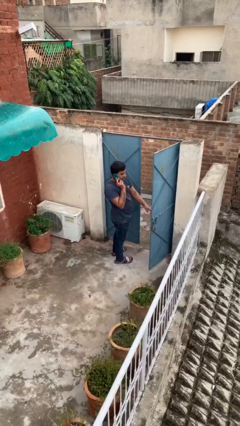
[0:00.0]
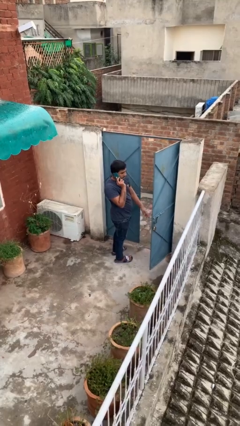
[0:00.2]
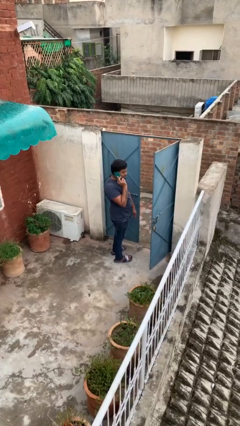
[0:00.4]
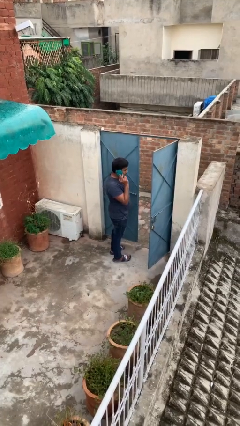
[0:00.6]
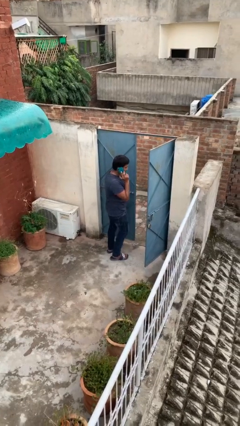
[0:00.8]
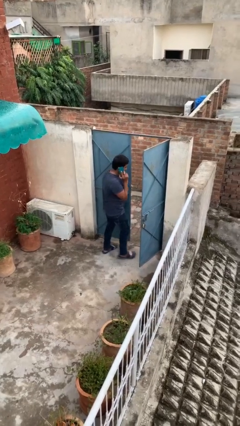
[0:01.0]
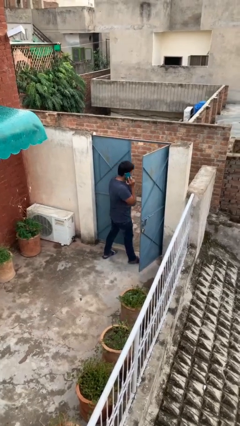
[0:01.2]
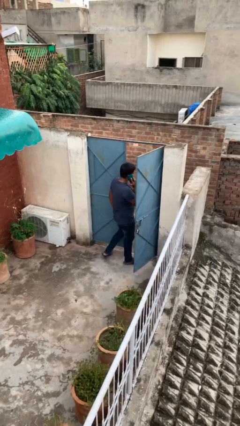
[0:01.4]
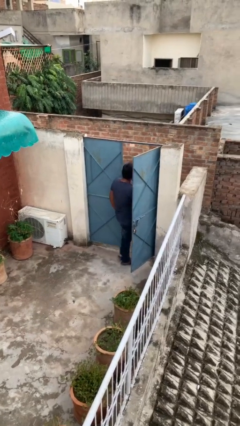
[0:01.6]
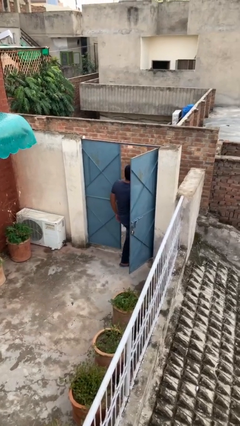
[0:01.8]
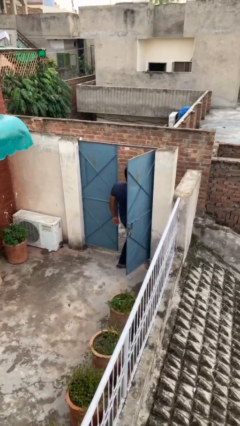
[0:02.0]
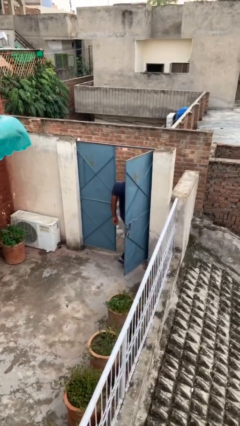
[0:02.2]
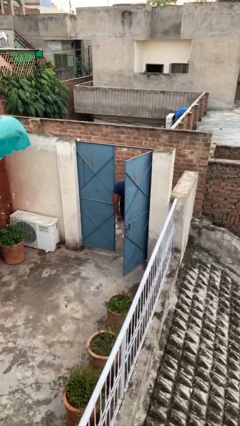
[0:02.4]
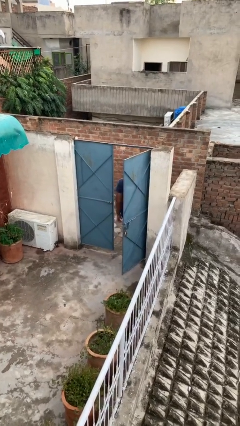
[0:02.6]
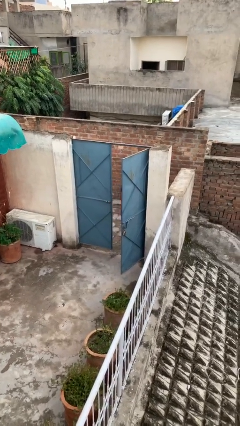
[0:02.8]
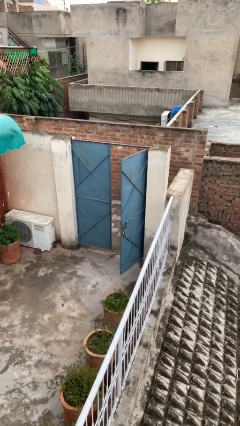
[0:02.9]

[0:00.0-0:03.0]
person exits scene through structure

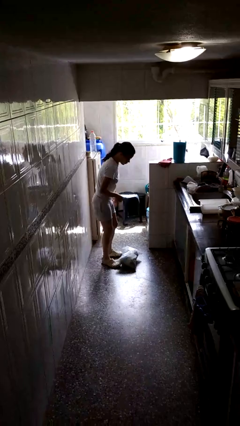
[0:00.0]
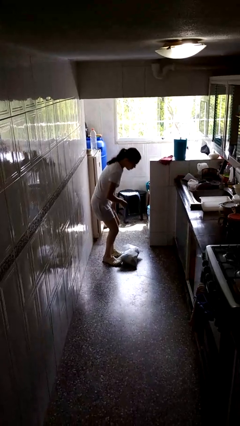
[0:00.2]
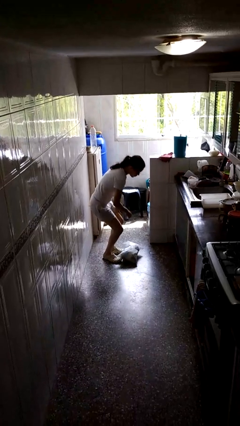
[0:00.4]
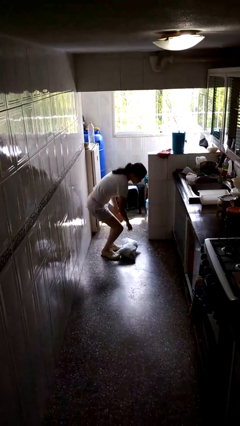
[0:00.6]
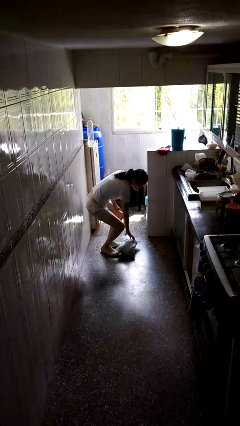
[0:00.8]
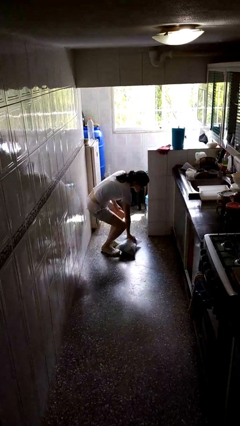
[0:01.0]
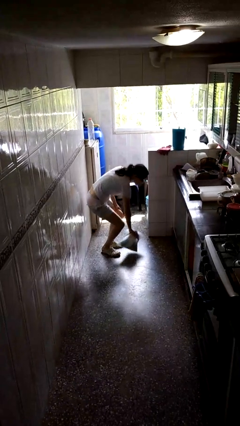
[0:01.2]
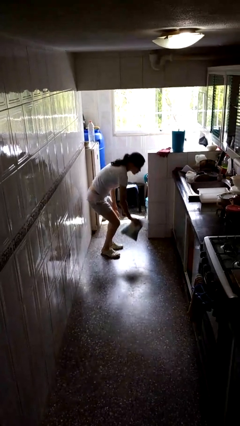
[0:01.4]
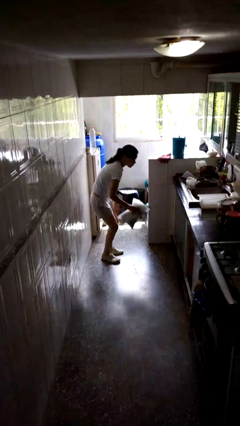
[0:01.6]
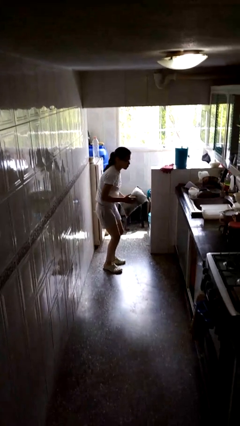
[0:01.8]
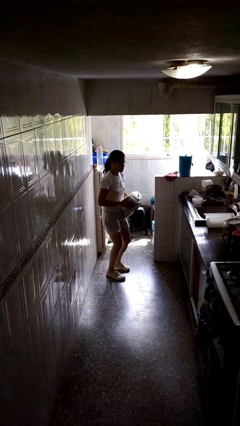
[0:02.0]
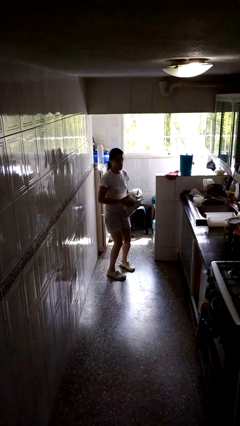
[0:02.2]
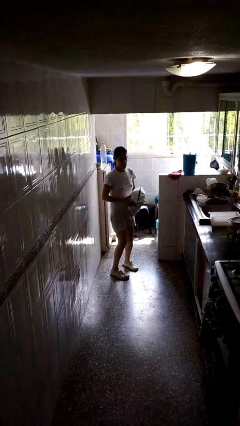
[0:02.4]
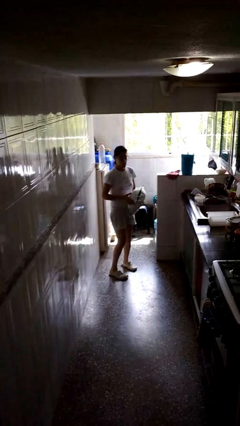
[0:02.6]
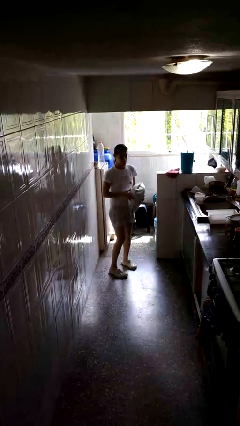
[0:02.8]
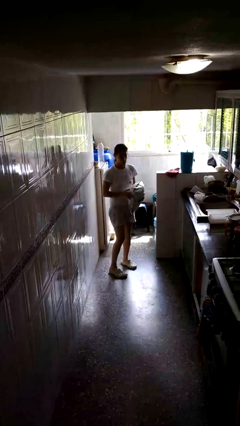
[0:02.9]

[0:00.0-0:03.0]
person picks up object from floor

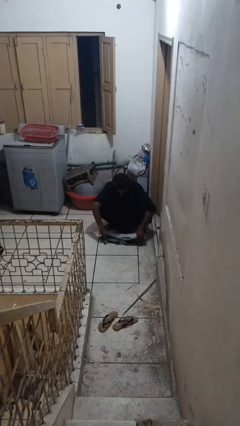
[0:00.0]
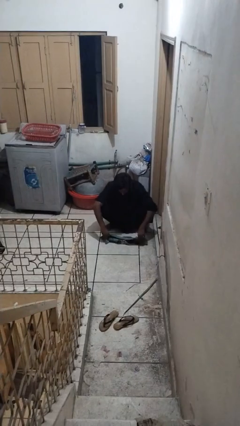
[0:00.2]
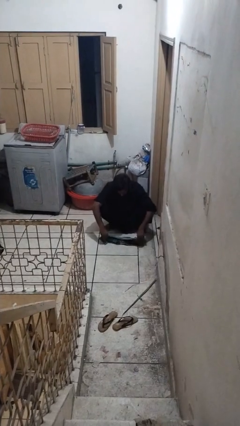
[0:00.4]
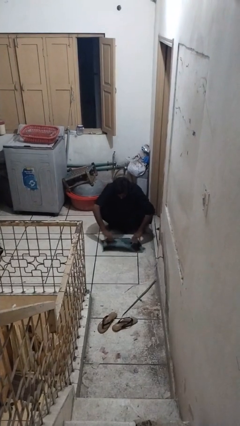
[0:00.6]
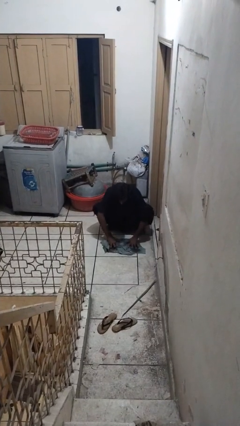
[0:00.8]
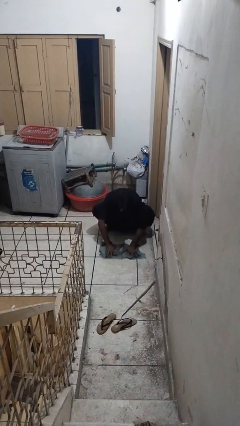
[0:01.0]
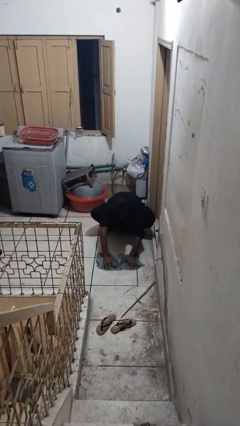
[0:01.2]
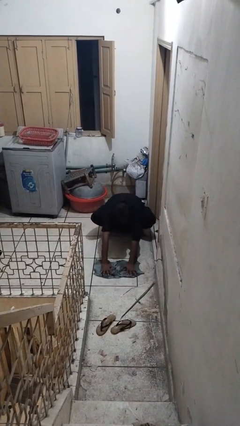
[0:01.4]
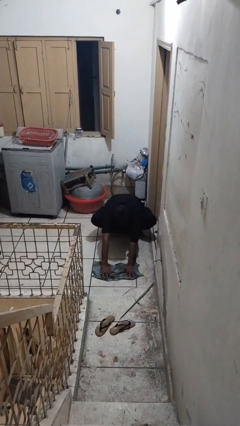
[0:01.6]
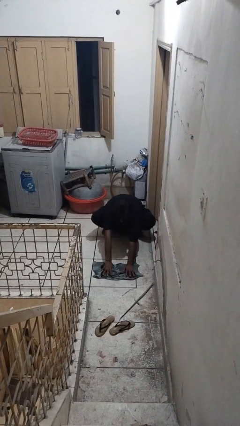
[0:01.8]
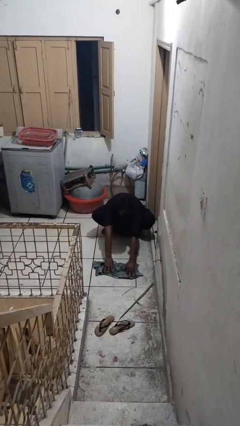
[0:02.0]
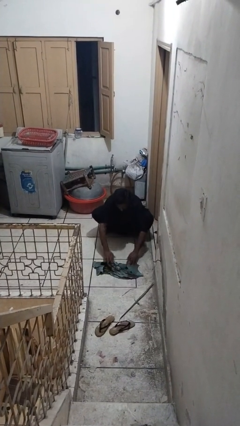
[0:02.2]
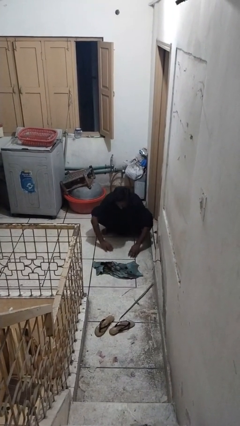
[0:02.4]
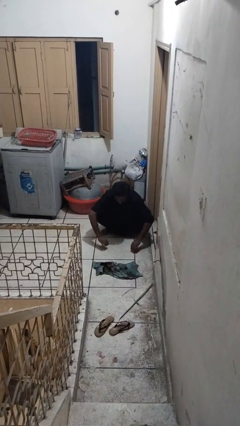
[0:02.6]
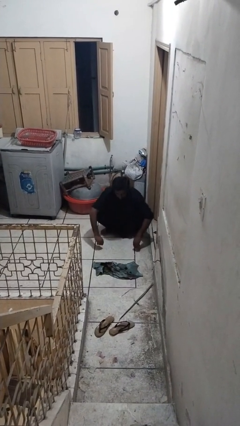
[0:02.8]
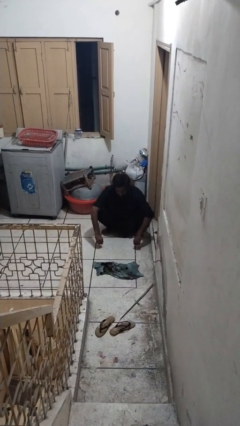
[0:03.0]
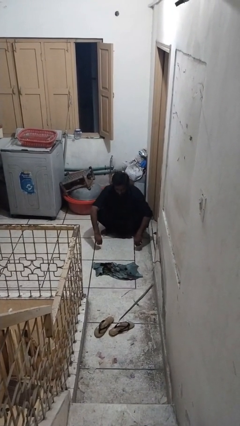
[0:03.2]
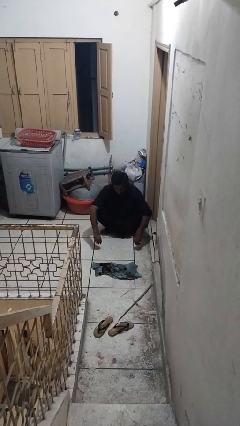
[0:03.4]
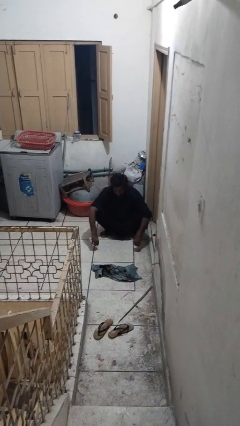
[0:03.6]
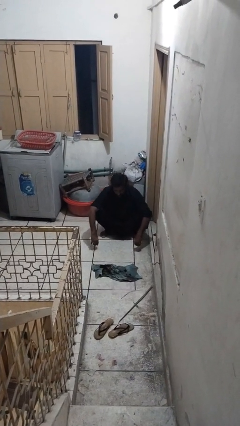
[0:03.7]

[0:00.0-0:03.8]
person mops

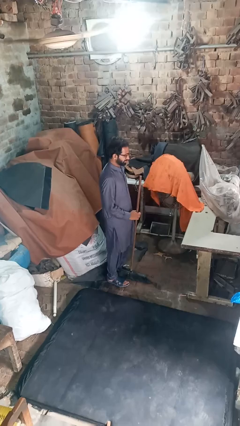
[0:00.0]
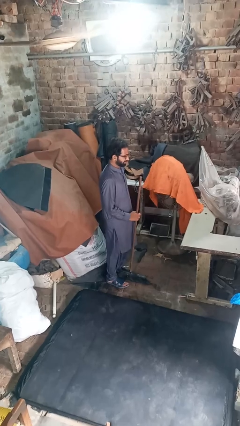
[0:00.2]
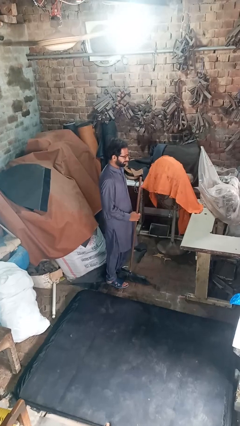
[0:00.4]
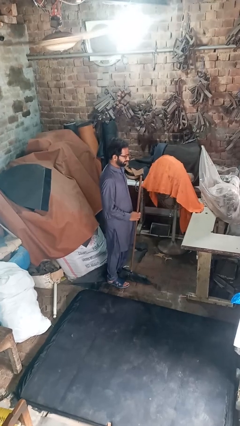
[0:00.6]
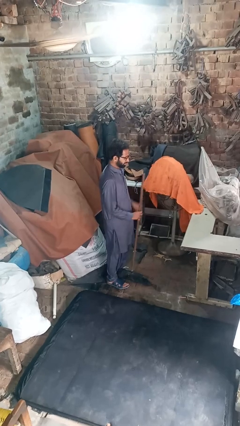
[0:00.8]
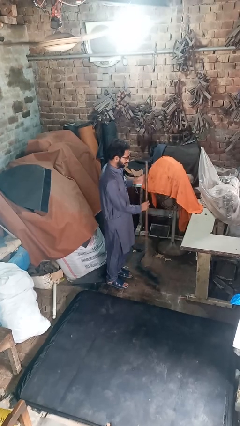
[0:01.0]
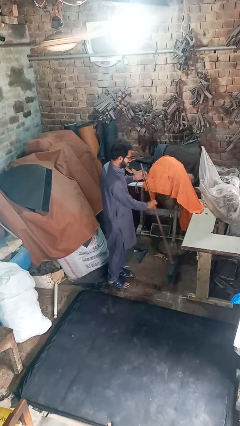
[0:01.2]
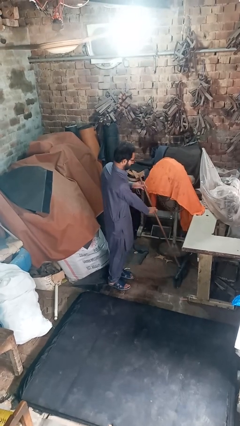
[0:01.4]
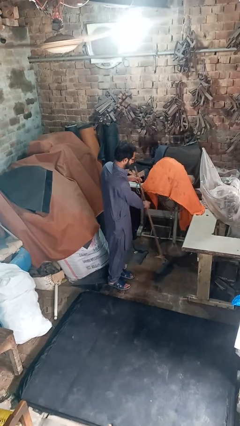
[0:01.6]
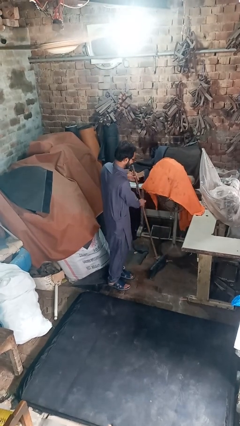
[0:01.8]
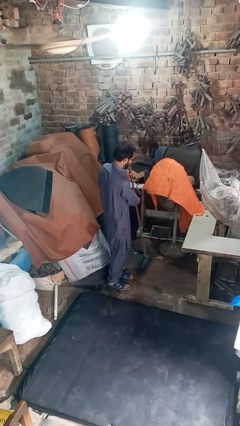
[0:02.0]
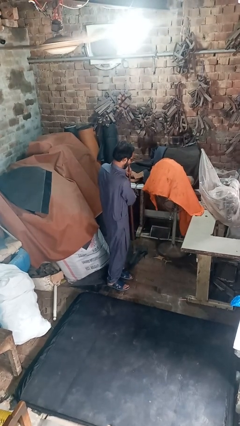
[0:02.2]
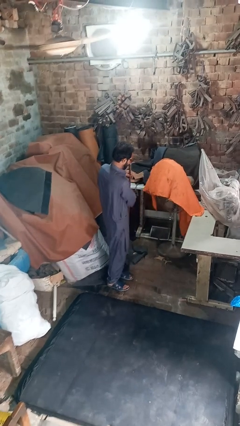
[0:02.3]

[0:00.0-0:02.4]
person sweeps floor

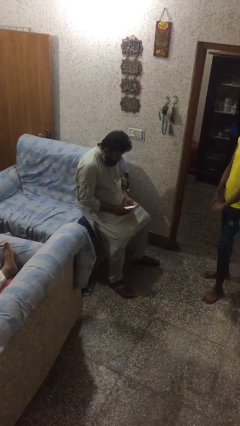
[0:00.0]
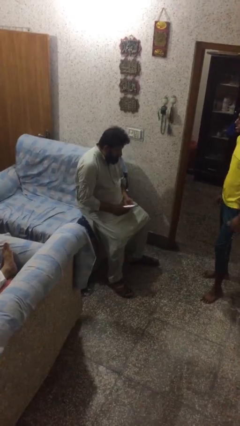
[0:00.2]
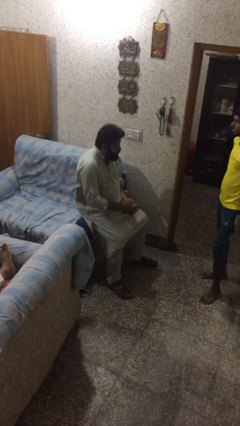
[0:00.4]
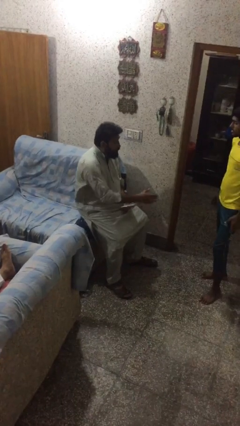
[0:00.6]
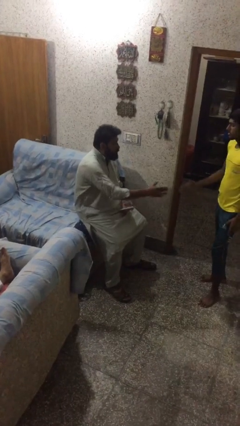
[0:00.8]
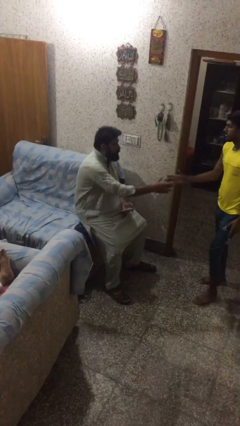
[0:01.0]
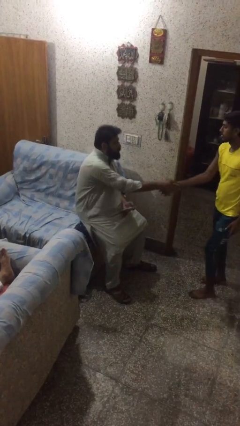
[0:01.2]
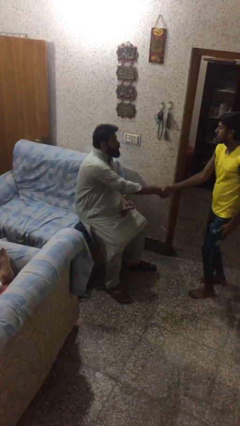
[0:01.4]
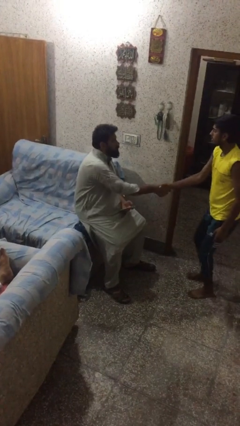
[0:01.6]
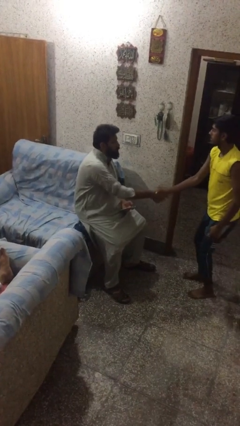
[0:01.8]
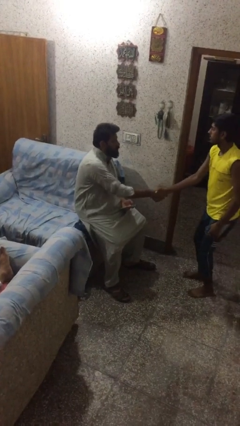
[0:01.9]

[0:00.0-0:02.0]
person shakes hand

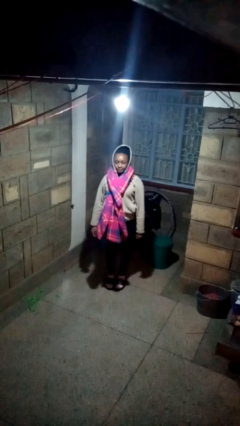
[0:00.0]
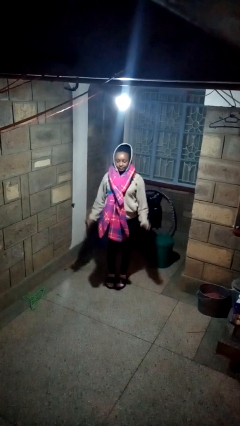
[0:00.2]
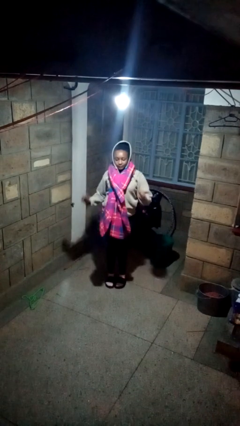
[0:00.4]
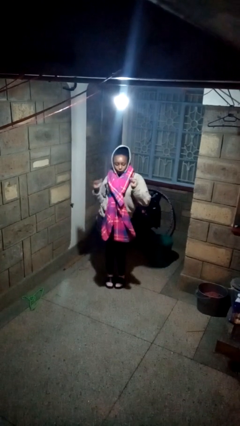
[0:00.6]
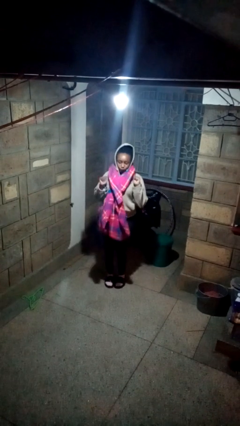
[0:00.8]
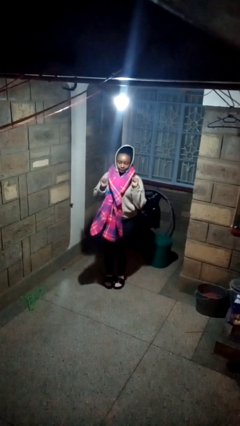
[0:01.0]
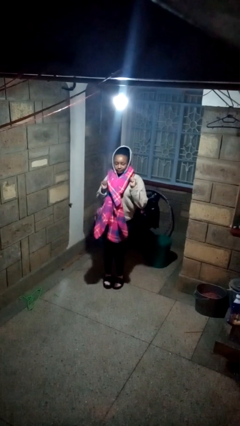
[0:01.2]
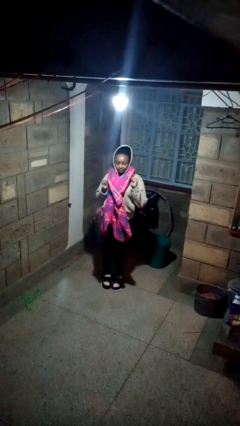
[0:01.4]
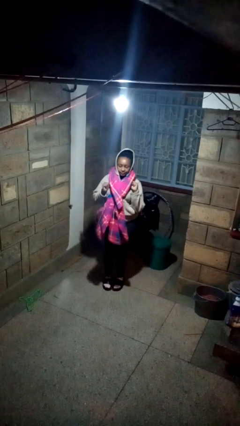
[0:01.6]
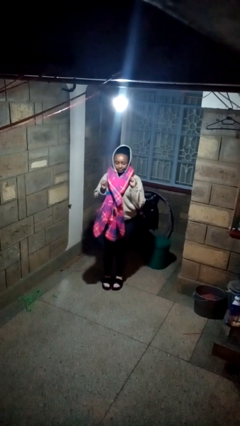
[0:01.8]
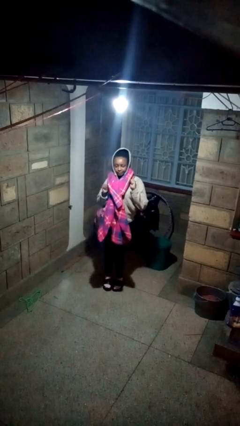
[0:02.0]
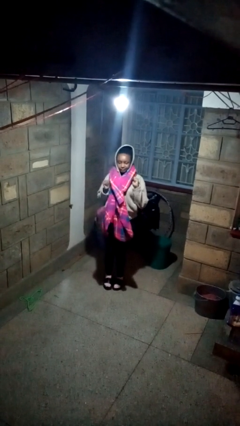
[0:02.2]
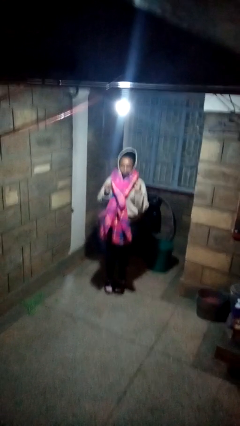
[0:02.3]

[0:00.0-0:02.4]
person wiggles hips

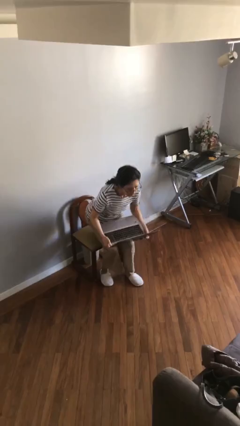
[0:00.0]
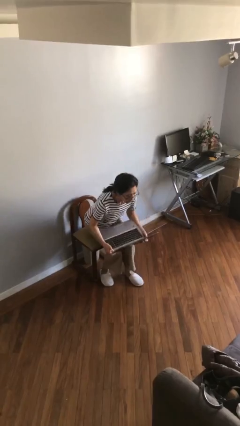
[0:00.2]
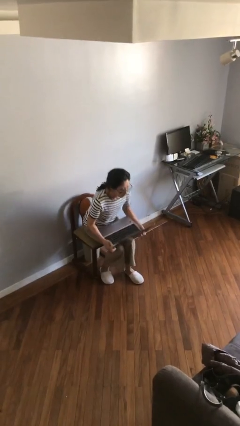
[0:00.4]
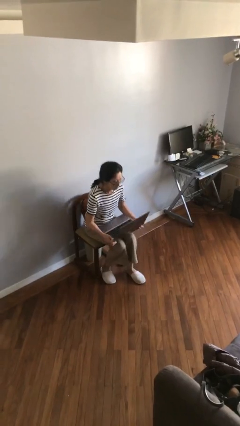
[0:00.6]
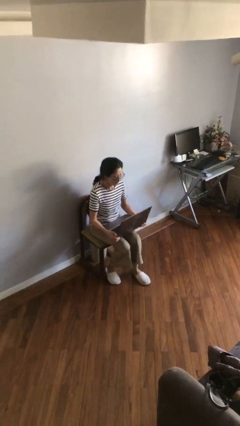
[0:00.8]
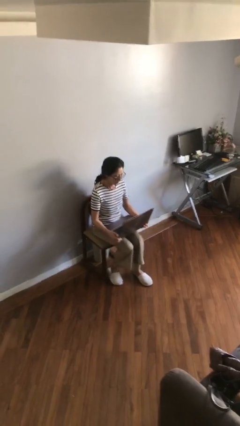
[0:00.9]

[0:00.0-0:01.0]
person sits down
